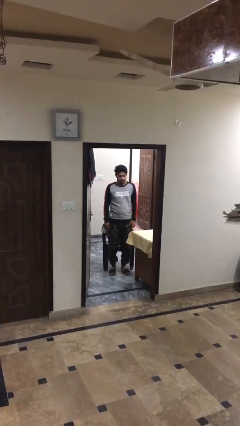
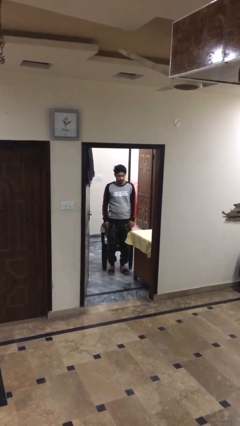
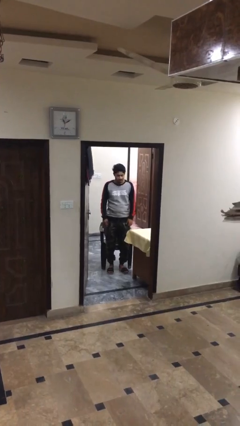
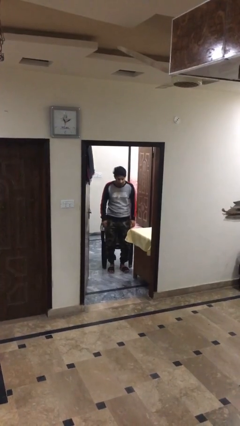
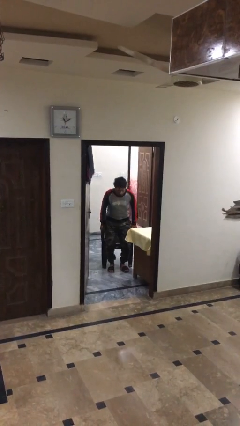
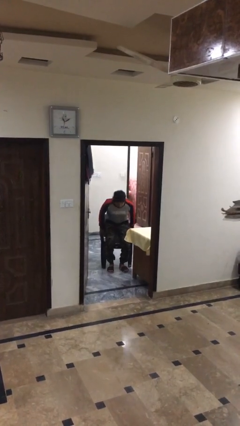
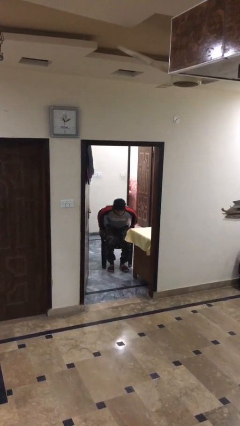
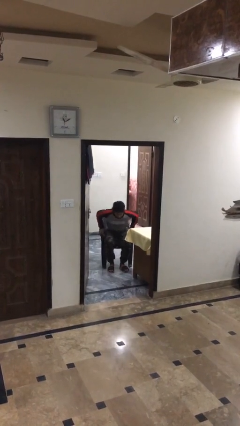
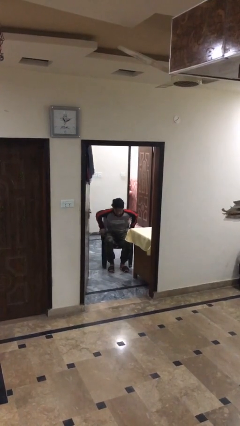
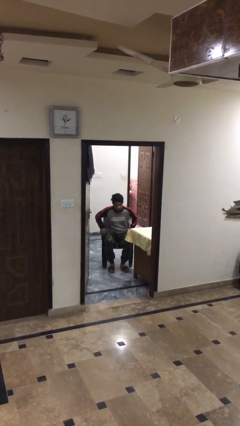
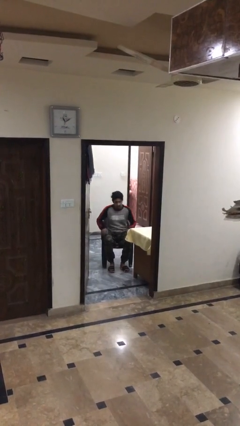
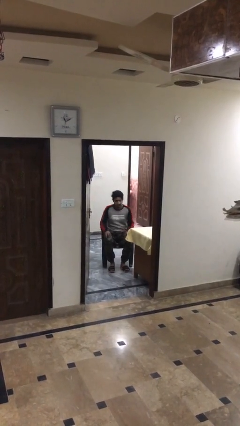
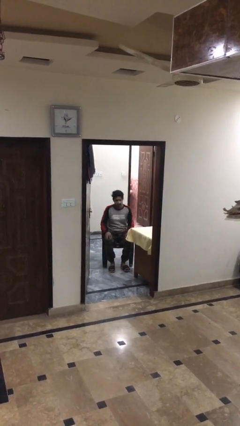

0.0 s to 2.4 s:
person sits down

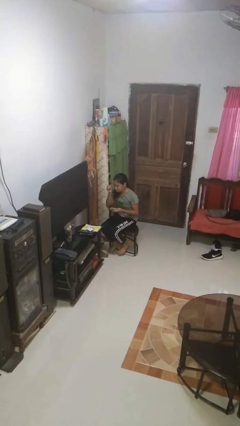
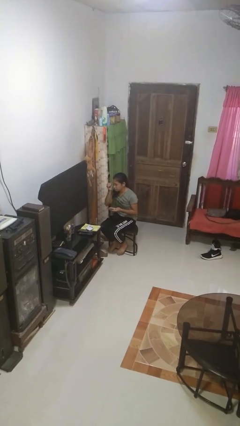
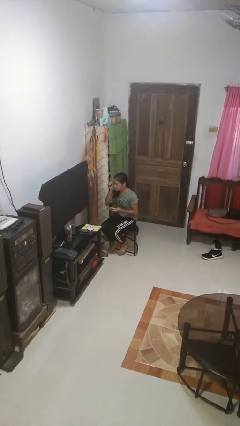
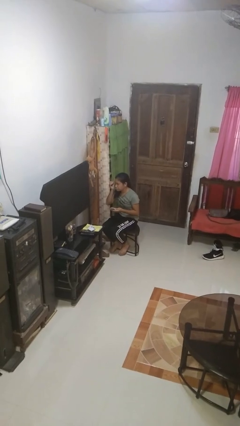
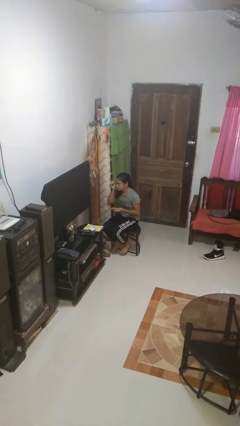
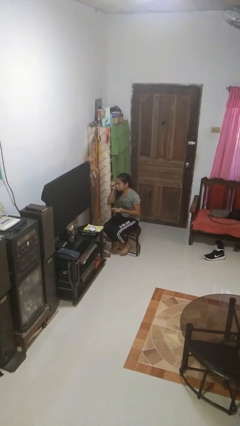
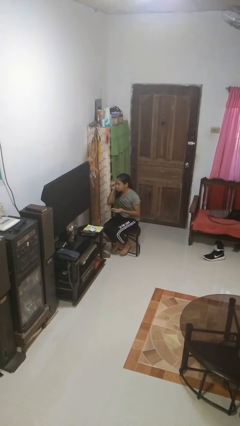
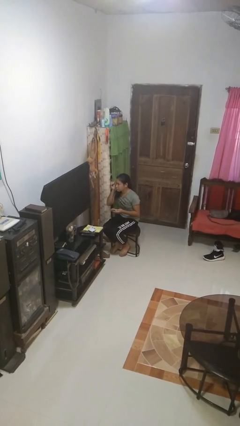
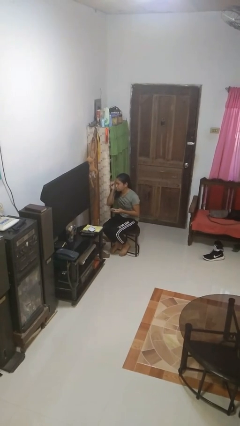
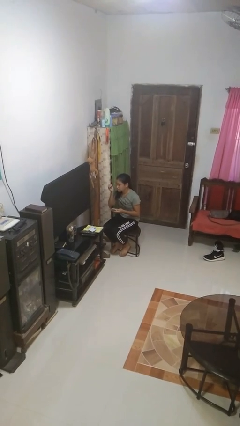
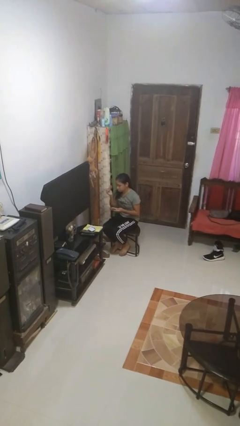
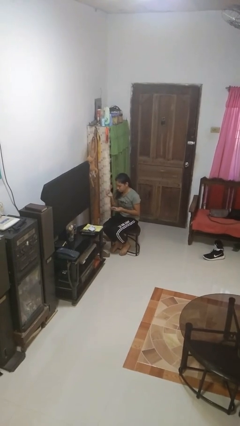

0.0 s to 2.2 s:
person applies eye makeup

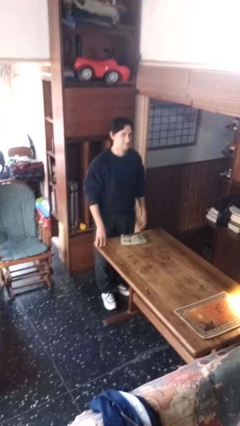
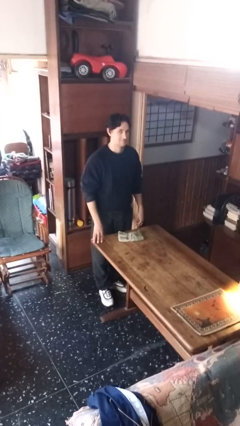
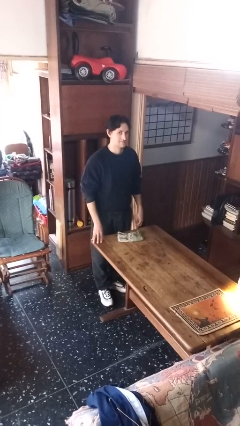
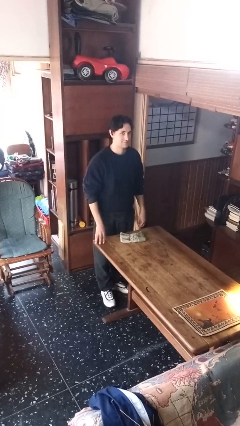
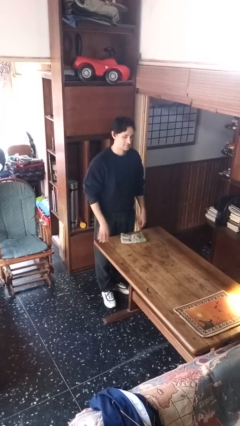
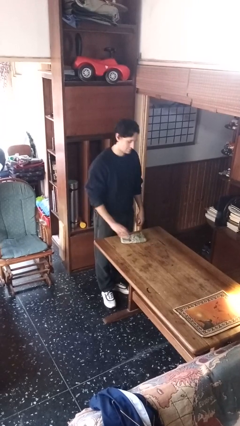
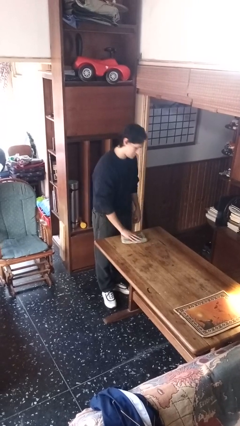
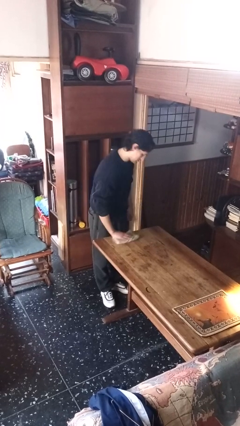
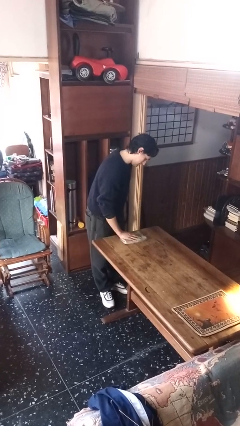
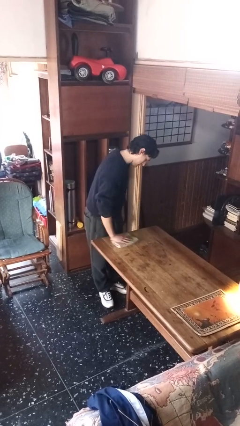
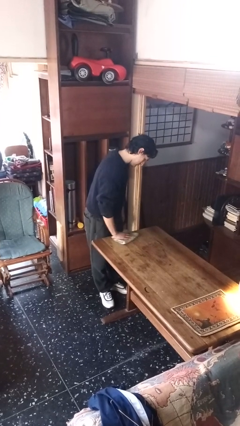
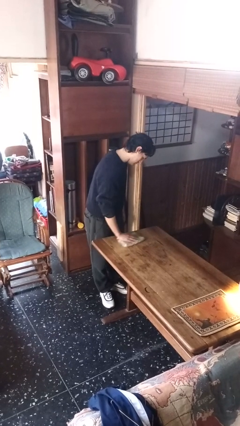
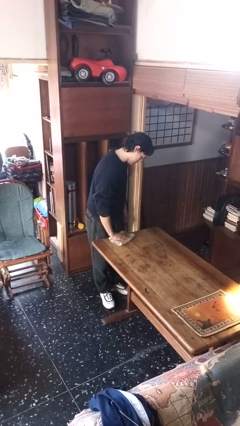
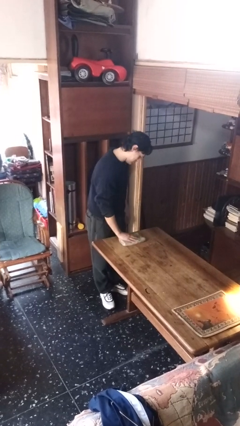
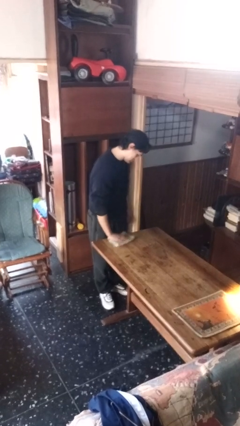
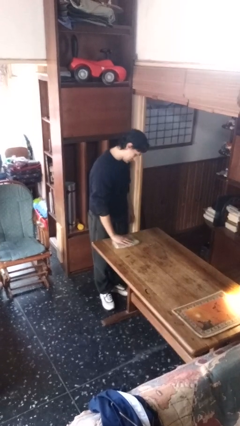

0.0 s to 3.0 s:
person cleans table with rag

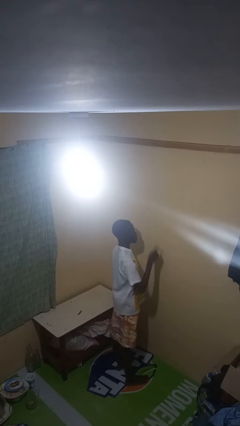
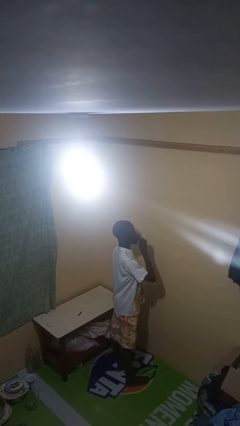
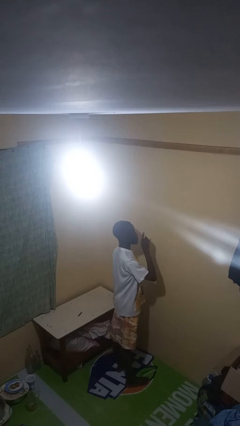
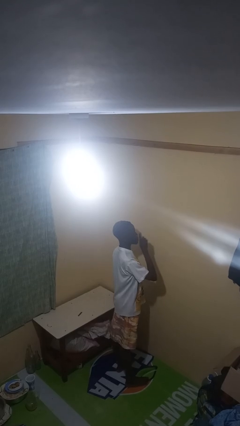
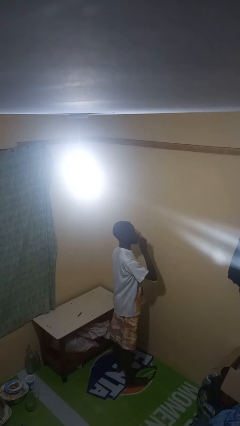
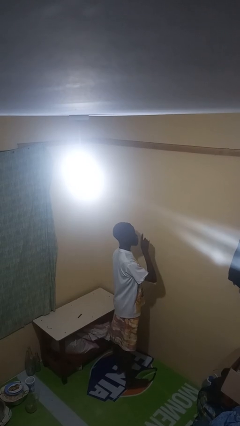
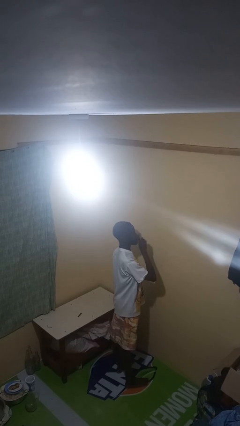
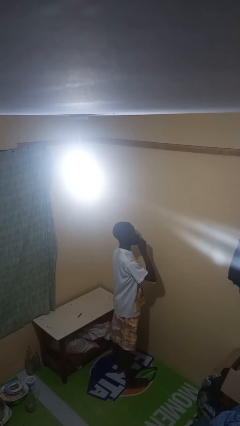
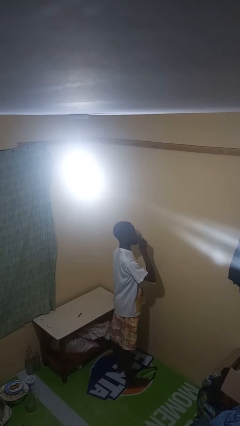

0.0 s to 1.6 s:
person gestures be quiet

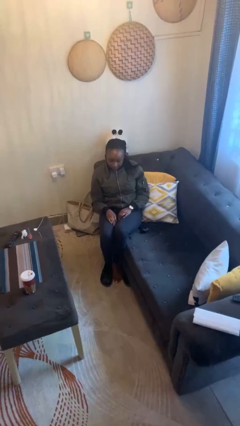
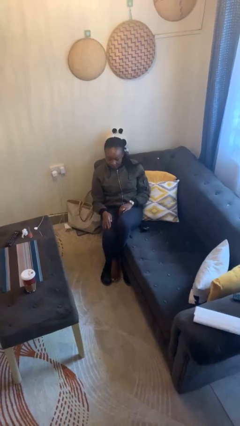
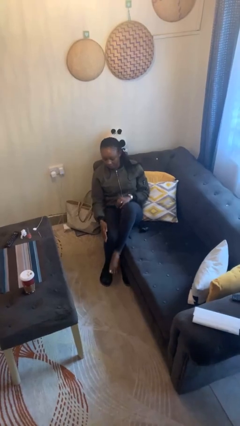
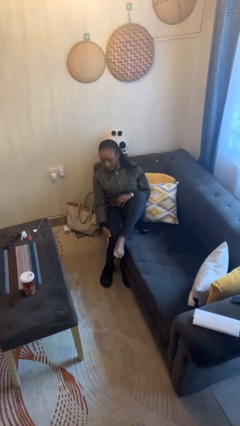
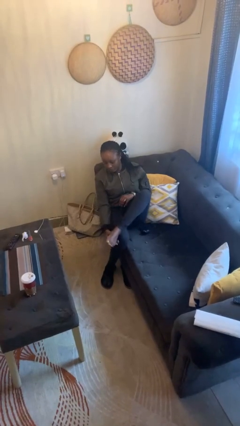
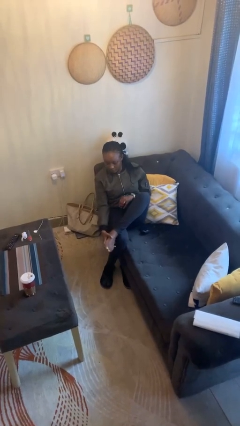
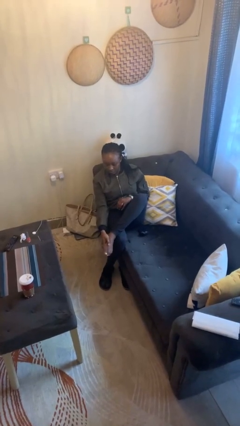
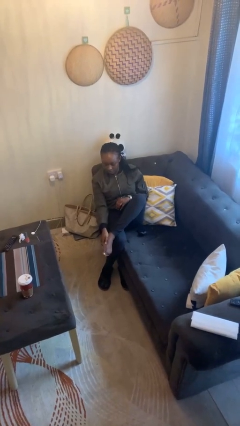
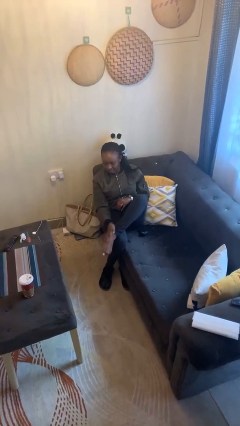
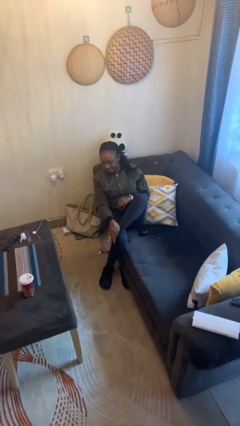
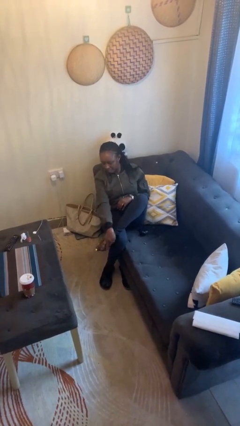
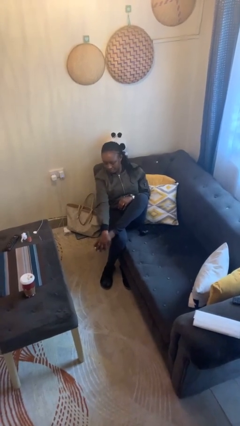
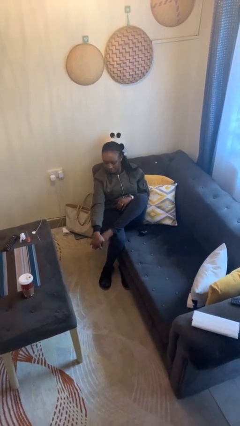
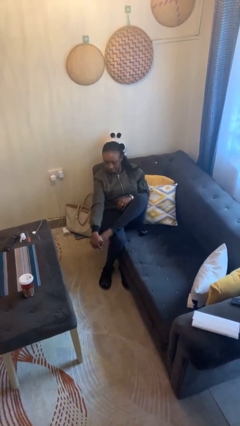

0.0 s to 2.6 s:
person rubs foot

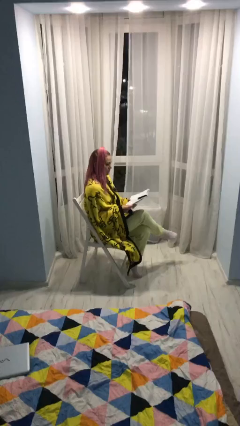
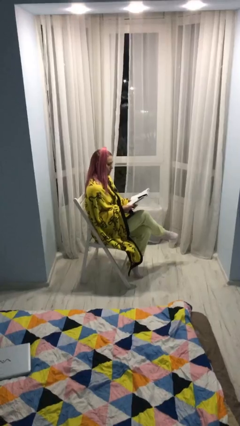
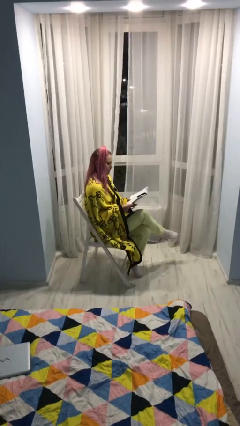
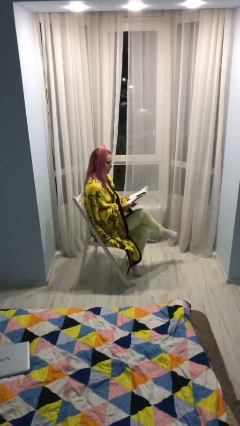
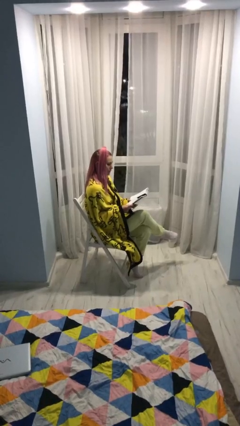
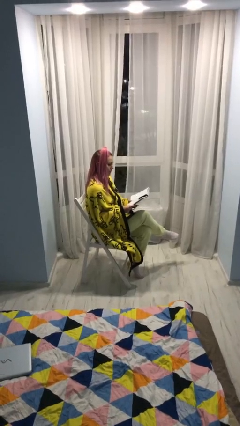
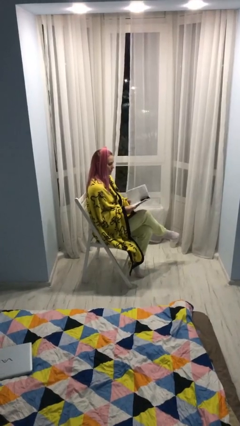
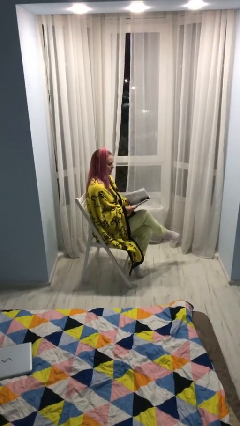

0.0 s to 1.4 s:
person reads document

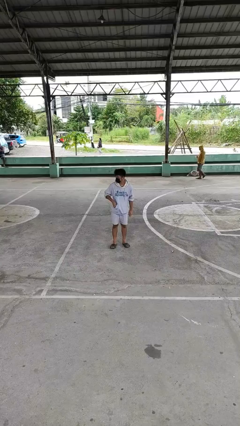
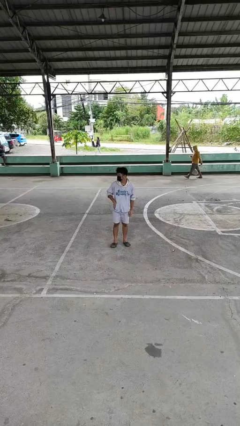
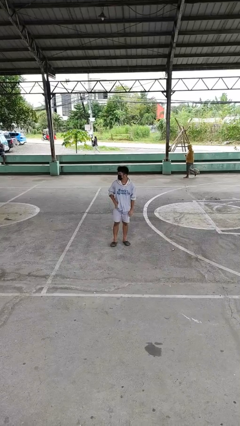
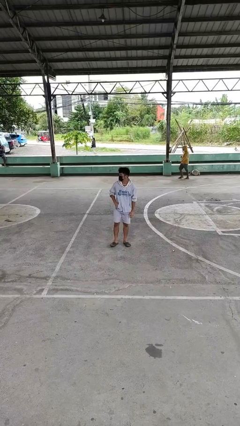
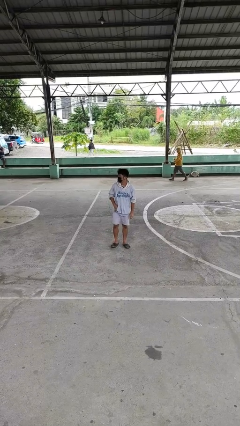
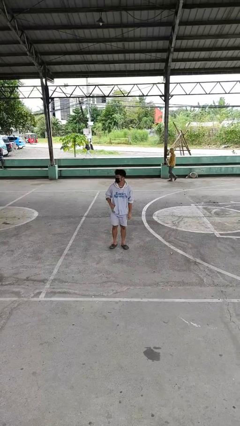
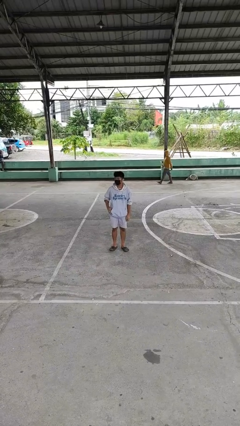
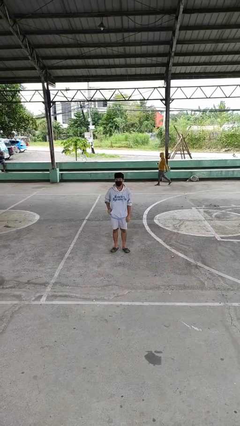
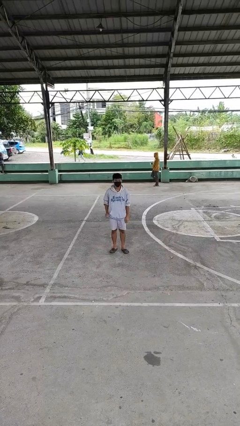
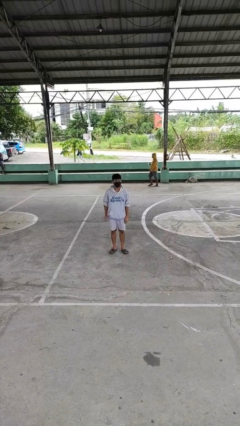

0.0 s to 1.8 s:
person puts phone into pocket

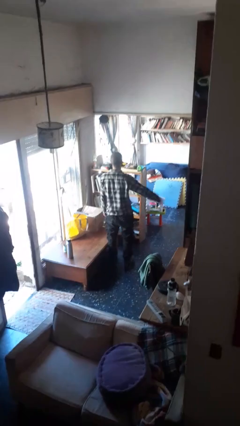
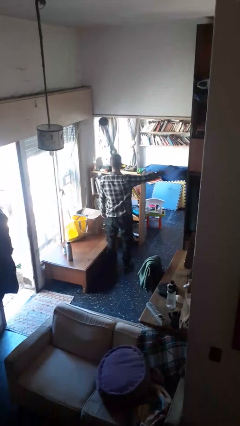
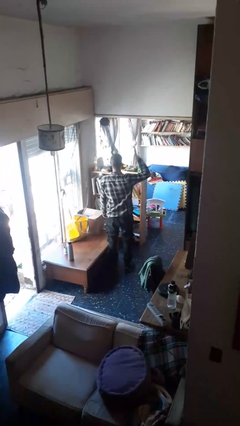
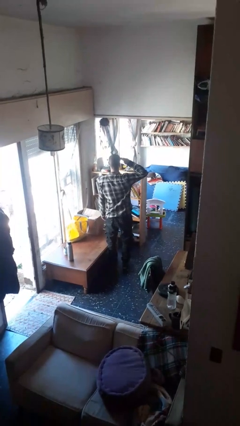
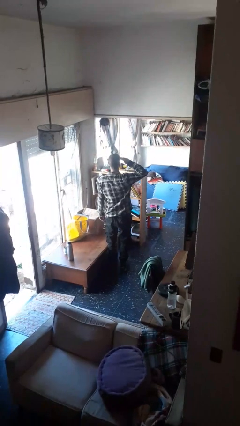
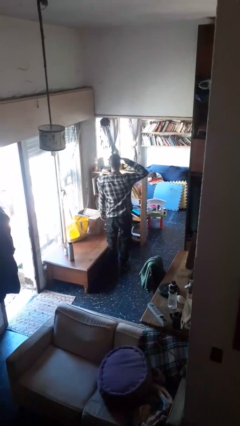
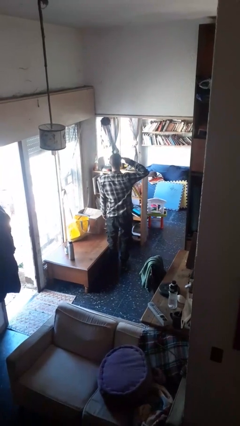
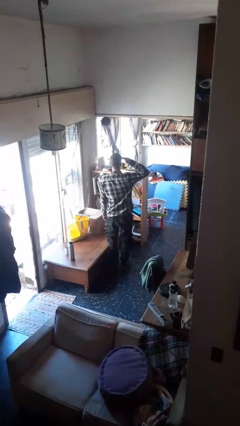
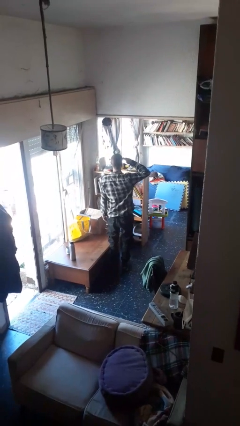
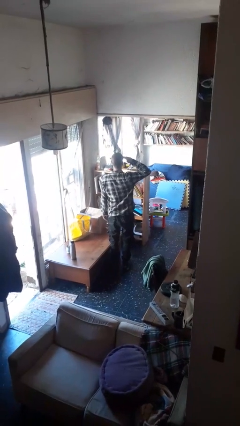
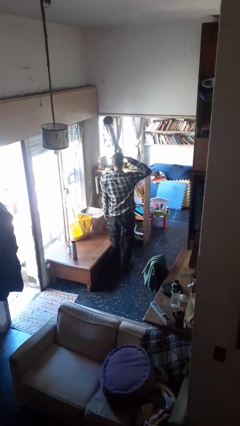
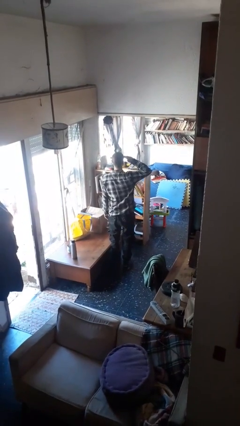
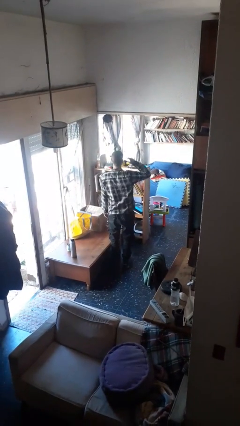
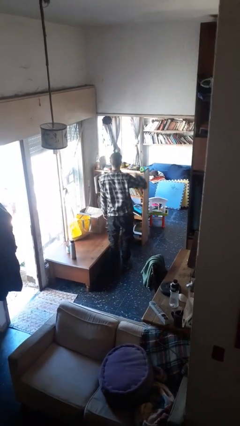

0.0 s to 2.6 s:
person salutes
